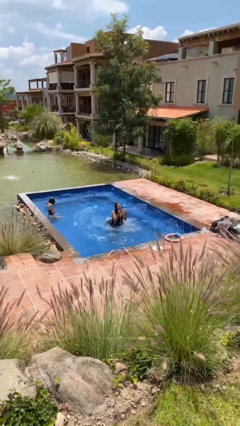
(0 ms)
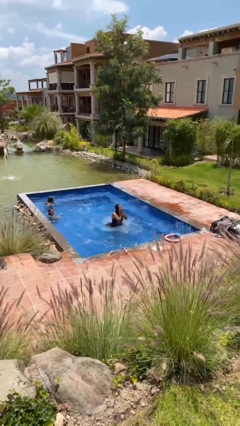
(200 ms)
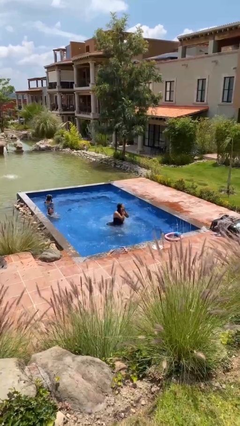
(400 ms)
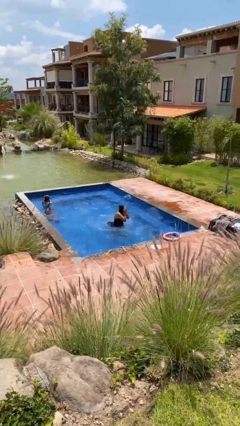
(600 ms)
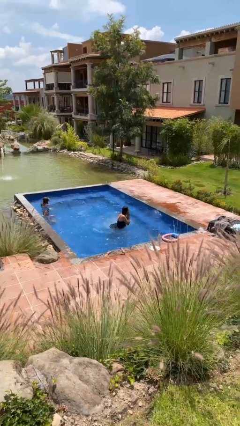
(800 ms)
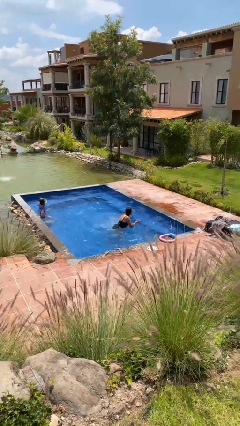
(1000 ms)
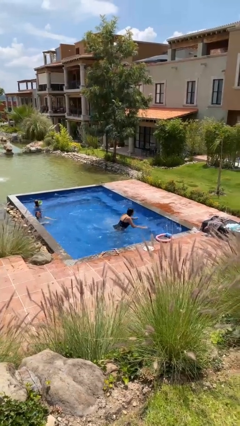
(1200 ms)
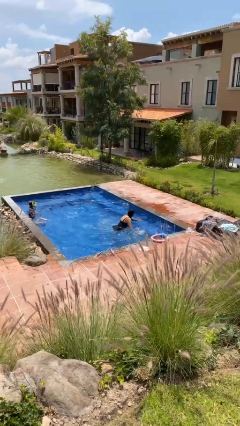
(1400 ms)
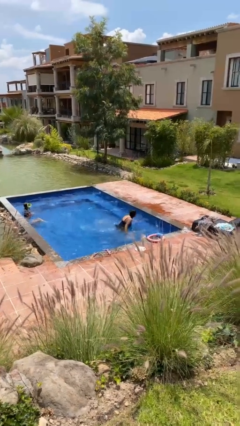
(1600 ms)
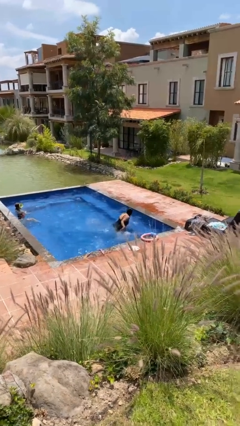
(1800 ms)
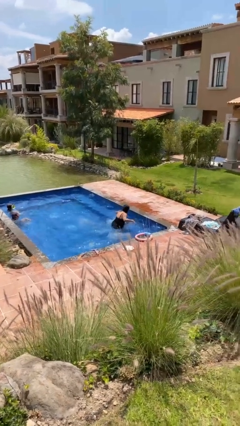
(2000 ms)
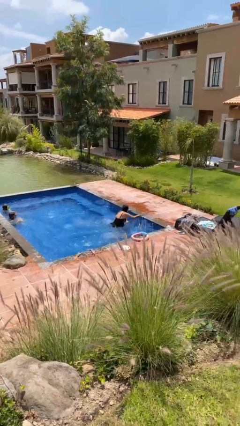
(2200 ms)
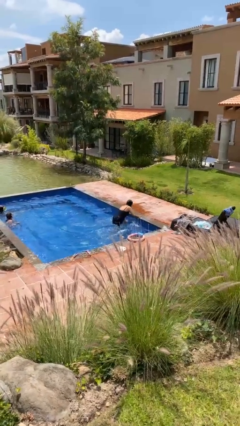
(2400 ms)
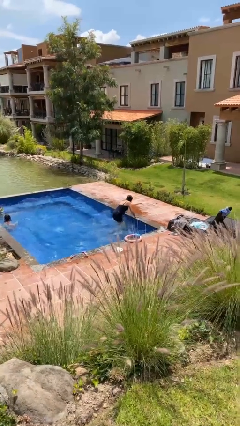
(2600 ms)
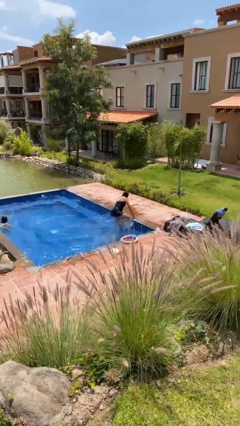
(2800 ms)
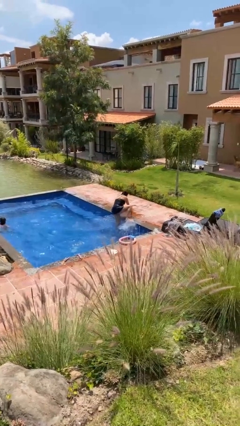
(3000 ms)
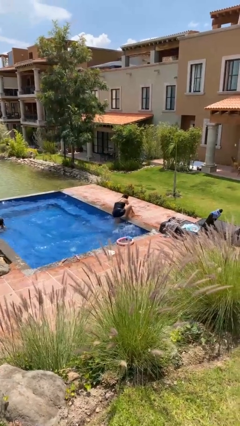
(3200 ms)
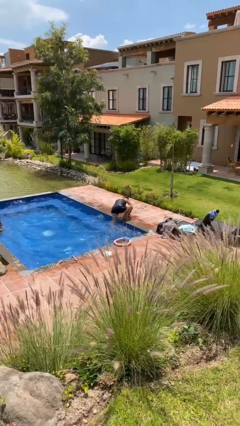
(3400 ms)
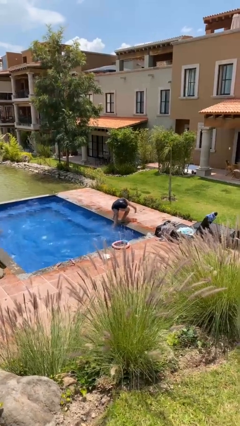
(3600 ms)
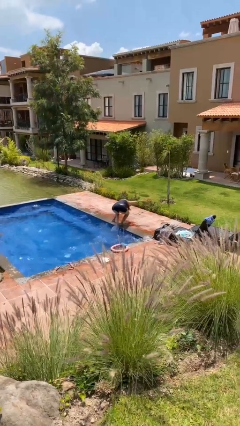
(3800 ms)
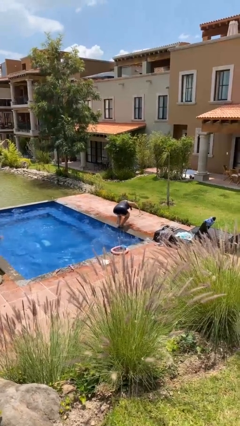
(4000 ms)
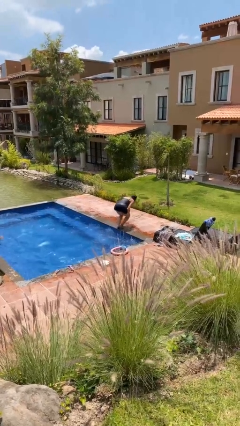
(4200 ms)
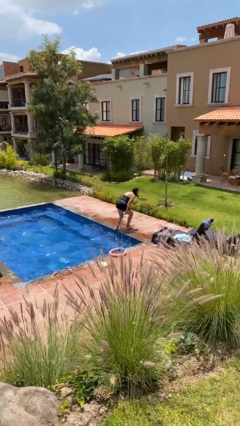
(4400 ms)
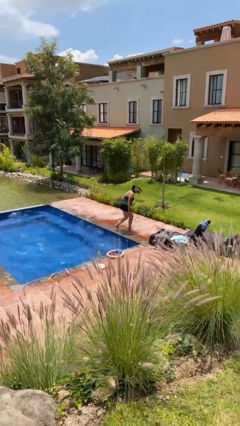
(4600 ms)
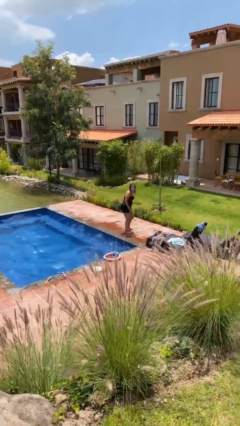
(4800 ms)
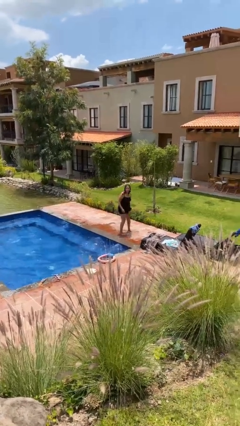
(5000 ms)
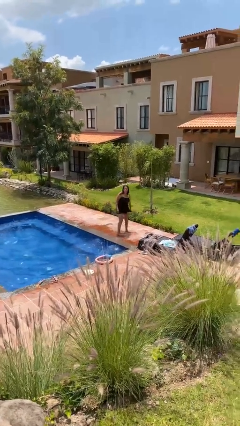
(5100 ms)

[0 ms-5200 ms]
person exits pool

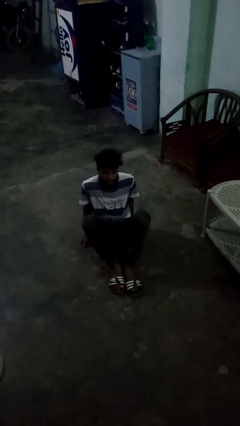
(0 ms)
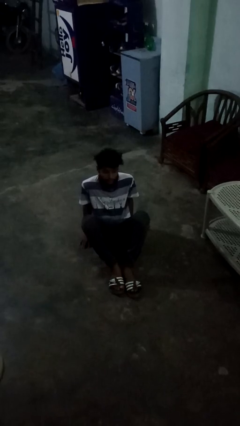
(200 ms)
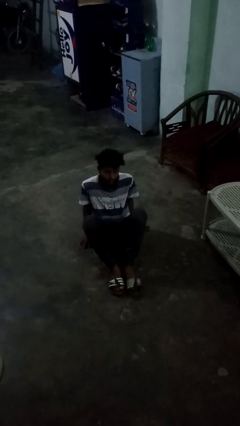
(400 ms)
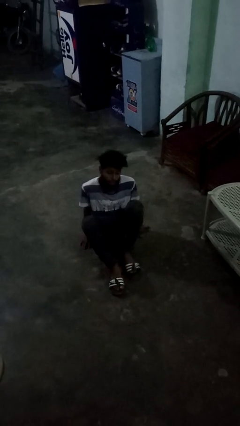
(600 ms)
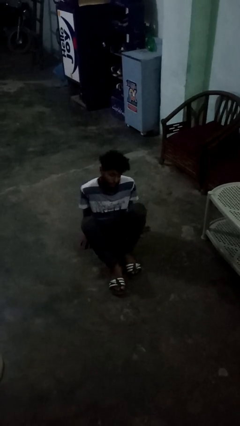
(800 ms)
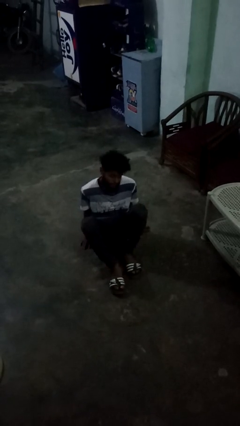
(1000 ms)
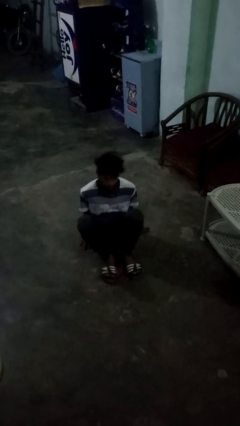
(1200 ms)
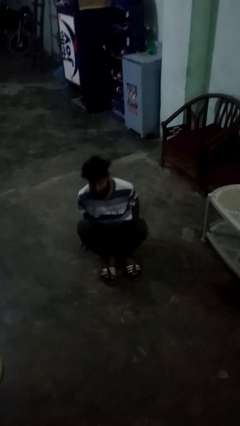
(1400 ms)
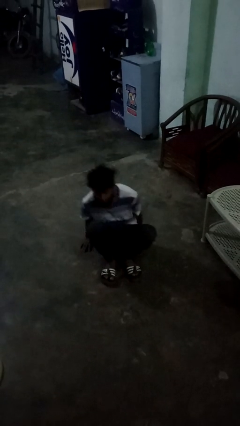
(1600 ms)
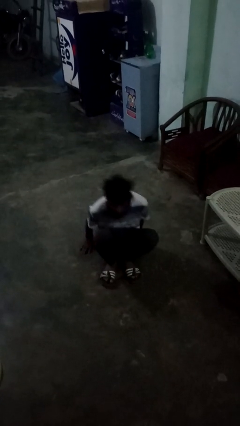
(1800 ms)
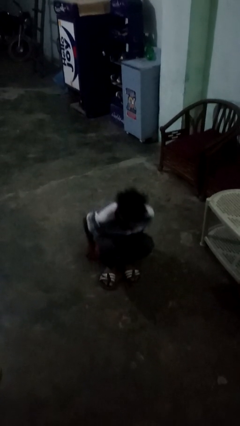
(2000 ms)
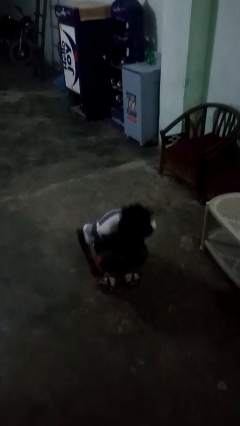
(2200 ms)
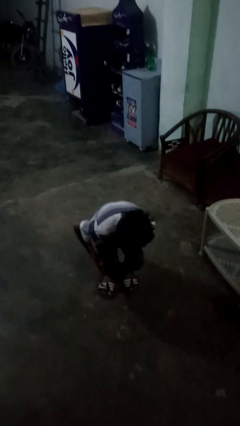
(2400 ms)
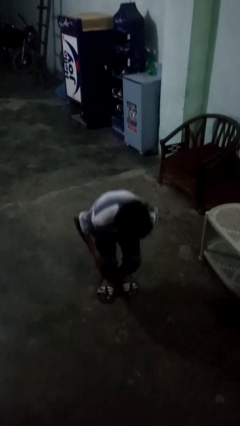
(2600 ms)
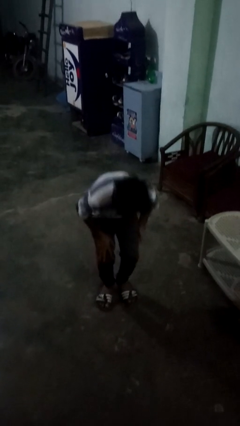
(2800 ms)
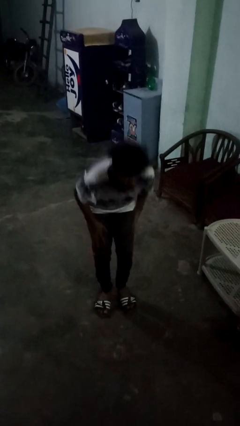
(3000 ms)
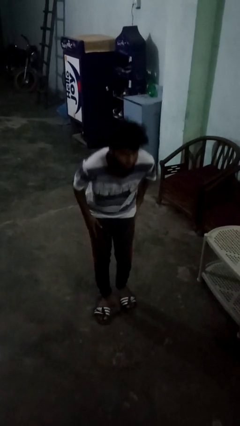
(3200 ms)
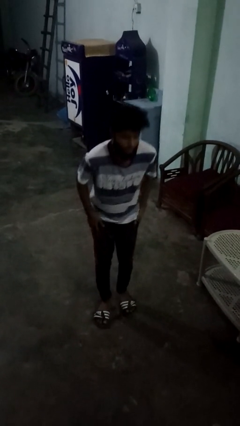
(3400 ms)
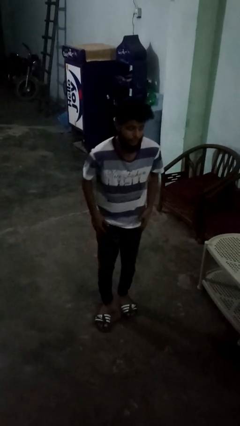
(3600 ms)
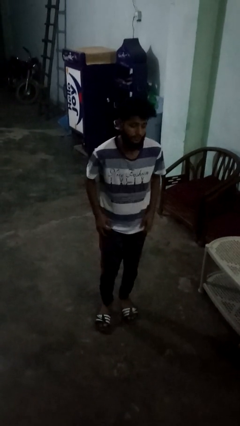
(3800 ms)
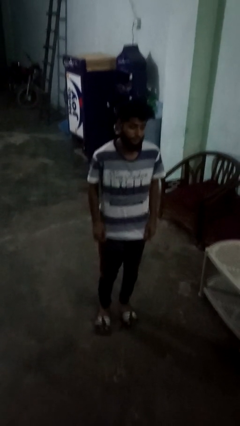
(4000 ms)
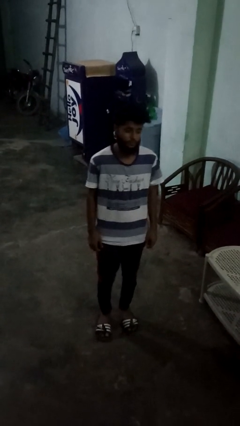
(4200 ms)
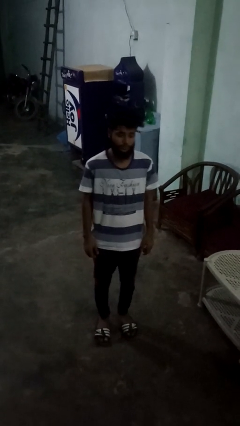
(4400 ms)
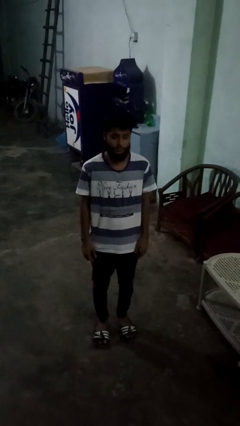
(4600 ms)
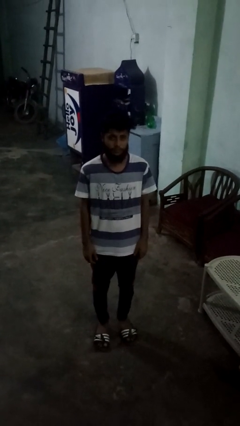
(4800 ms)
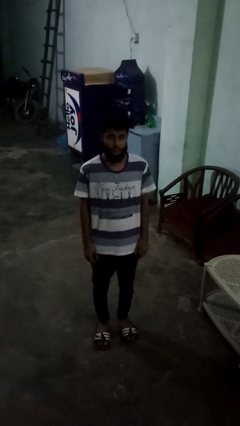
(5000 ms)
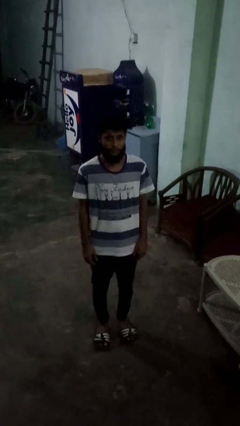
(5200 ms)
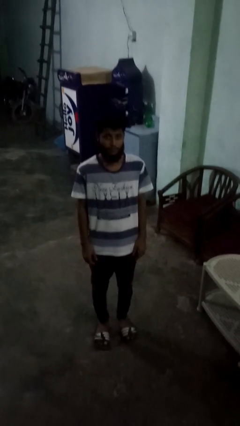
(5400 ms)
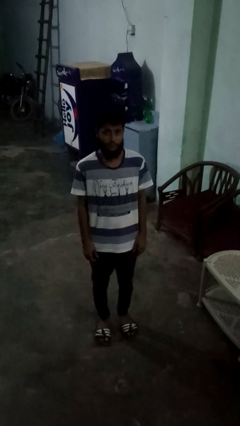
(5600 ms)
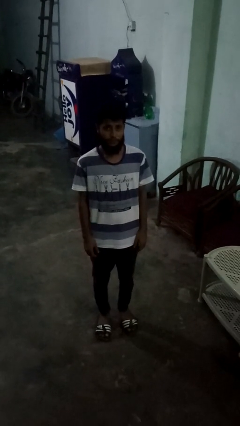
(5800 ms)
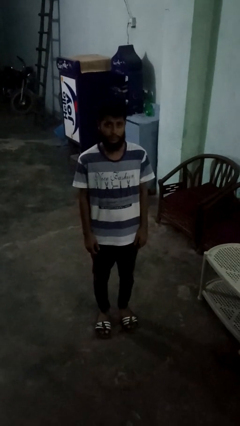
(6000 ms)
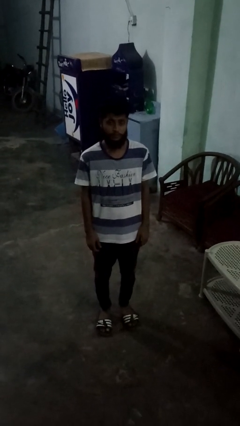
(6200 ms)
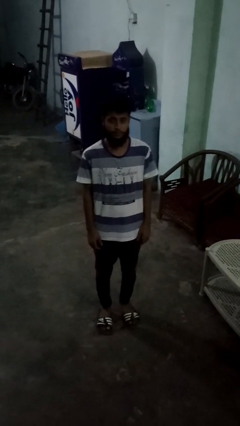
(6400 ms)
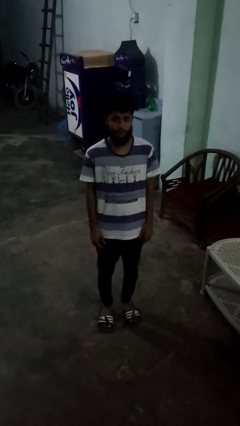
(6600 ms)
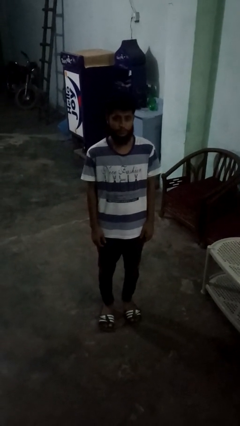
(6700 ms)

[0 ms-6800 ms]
person stands up from floor

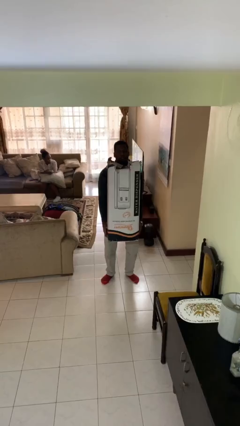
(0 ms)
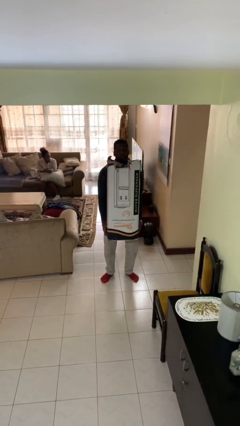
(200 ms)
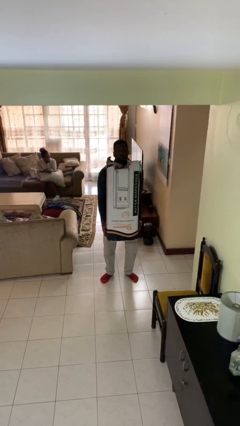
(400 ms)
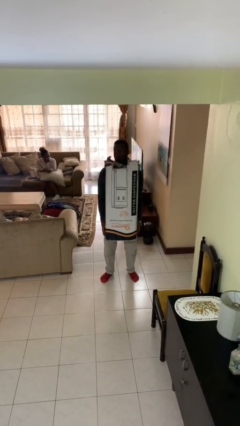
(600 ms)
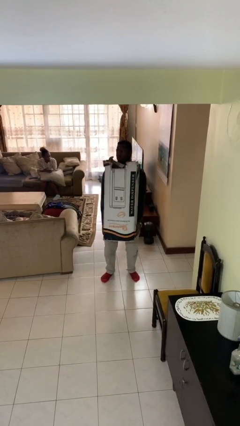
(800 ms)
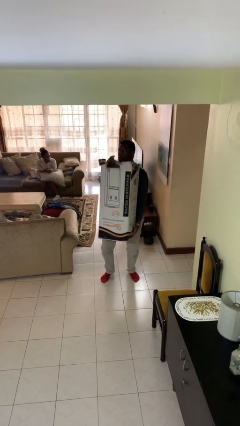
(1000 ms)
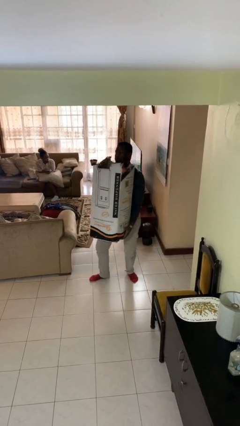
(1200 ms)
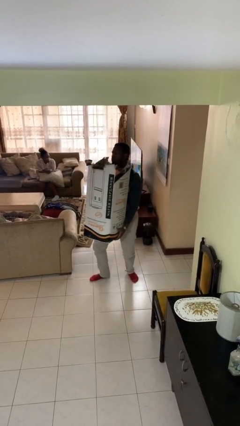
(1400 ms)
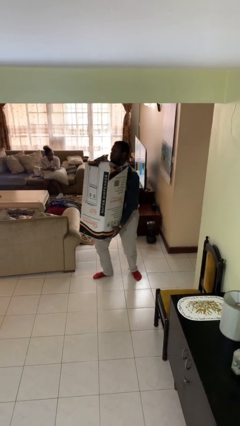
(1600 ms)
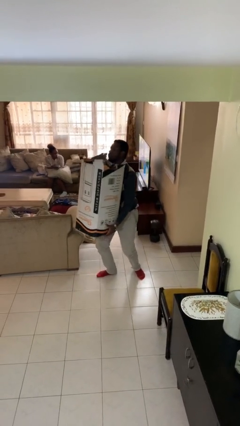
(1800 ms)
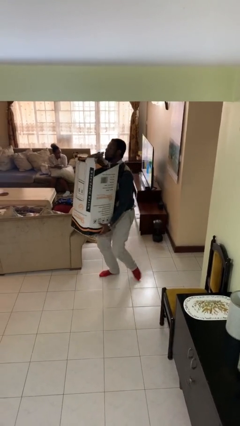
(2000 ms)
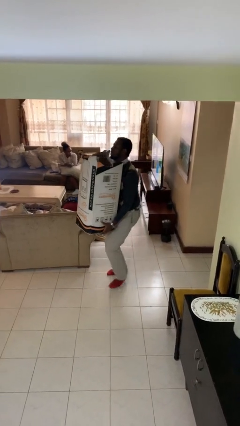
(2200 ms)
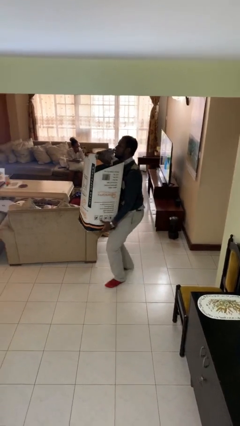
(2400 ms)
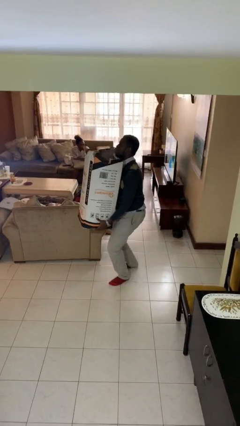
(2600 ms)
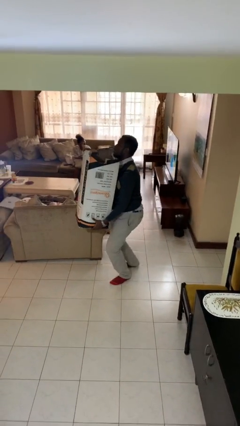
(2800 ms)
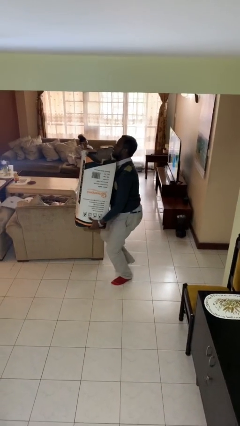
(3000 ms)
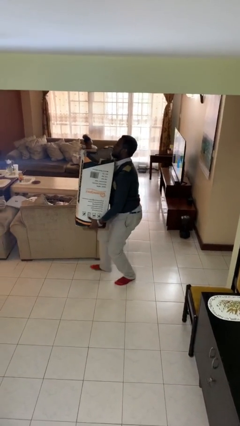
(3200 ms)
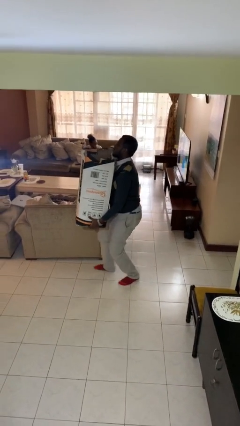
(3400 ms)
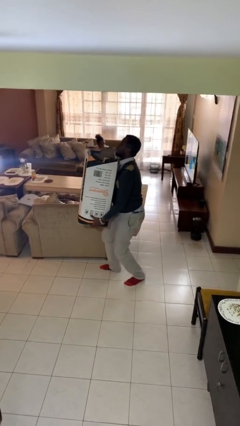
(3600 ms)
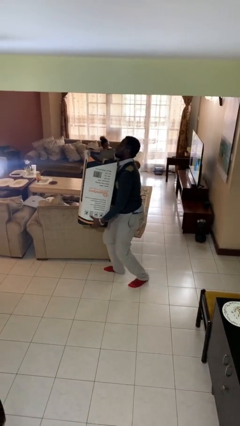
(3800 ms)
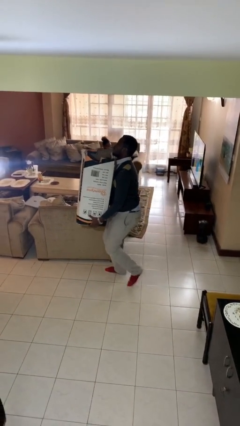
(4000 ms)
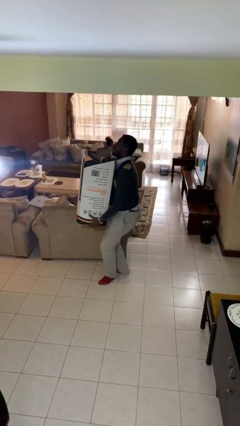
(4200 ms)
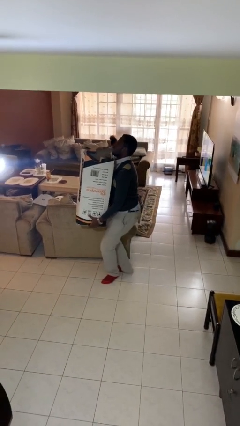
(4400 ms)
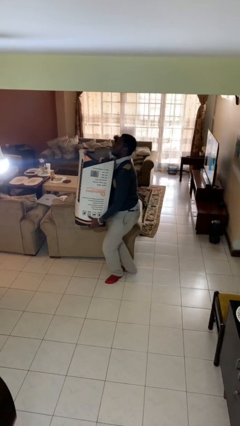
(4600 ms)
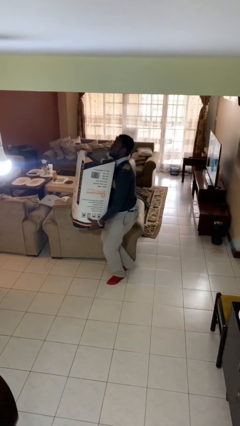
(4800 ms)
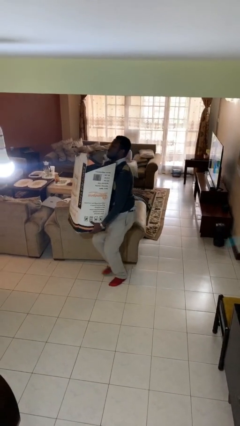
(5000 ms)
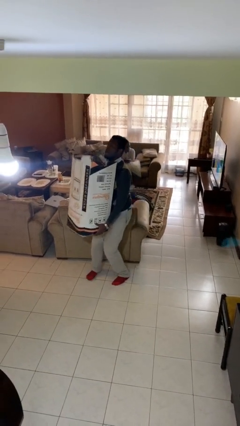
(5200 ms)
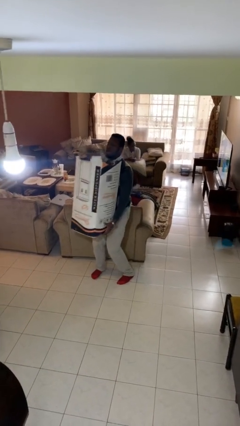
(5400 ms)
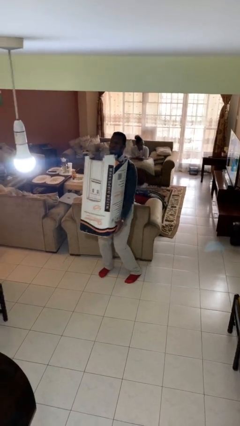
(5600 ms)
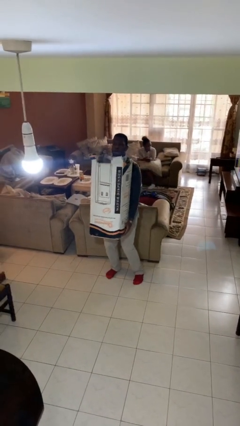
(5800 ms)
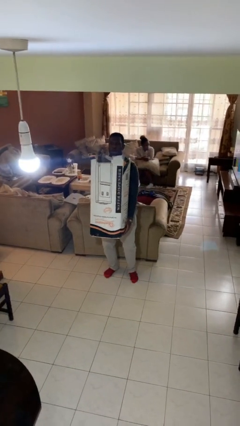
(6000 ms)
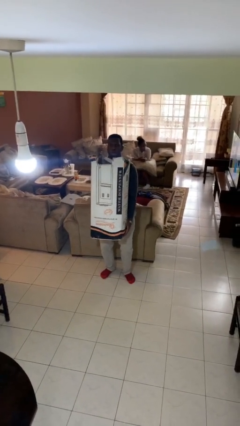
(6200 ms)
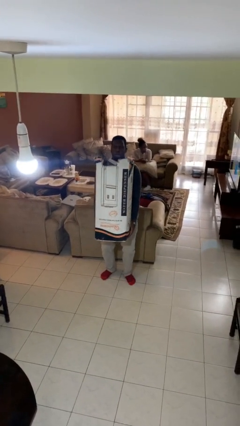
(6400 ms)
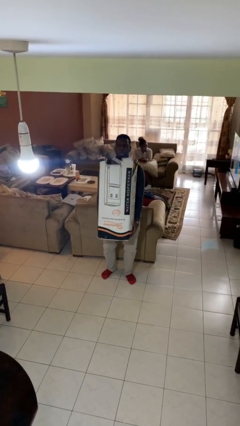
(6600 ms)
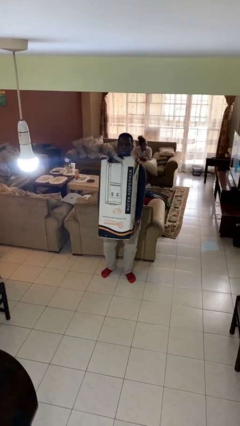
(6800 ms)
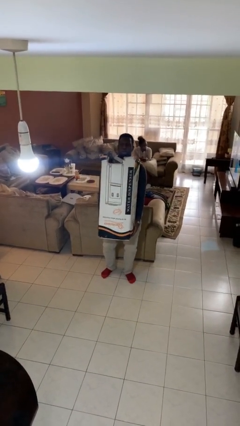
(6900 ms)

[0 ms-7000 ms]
person carries heavy object
